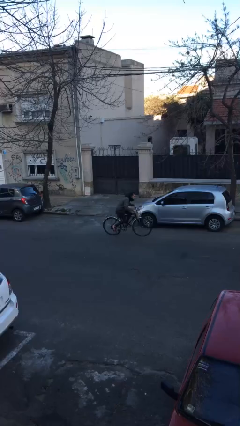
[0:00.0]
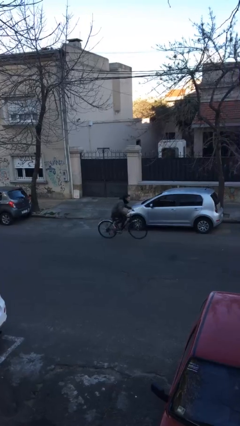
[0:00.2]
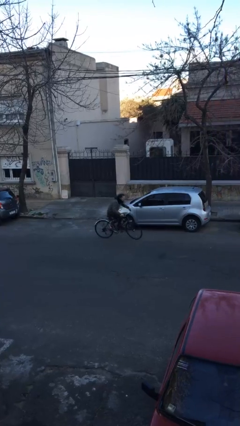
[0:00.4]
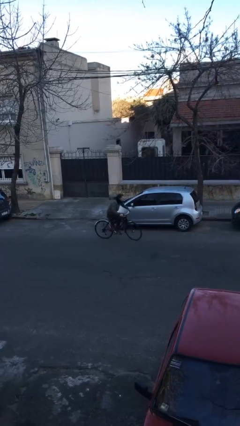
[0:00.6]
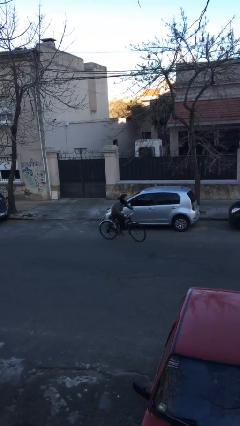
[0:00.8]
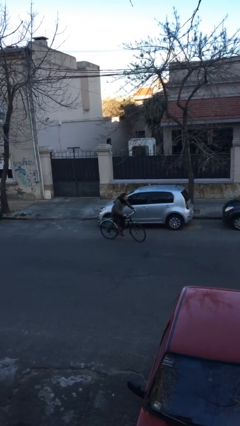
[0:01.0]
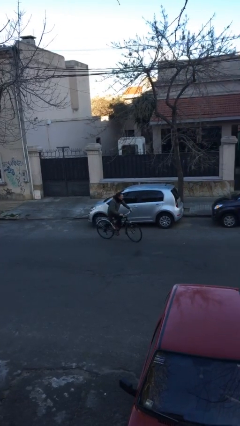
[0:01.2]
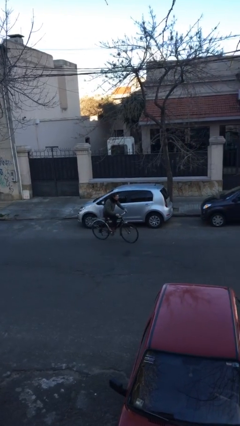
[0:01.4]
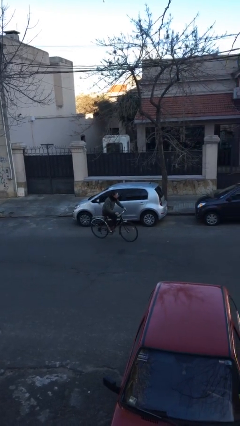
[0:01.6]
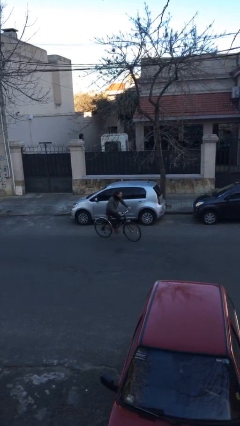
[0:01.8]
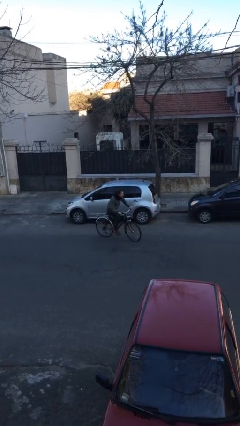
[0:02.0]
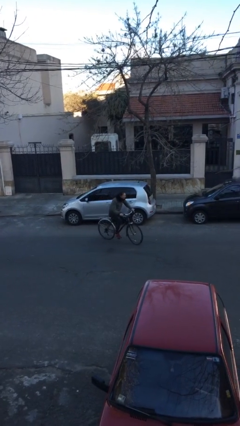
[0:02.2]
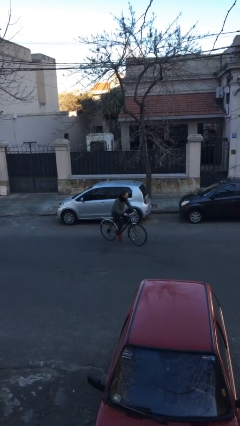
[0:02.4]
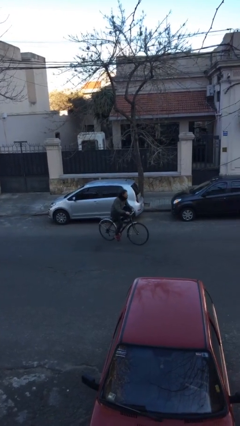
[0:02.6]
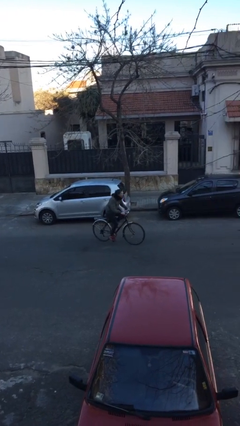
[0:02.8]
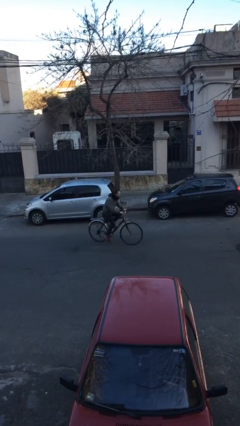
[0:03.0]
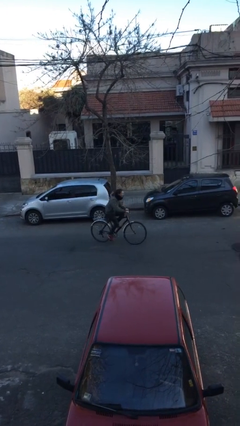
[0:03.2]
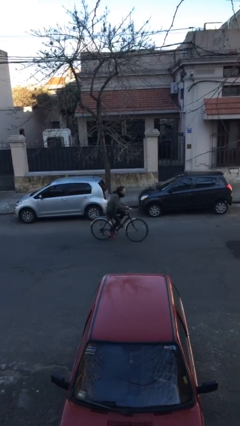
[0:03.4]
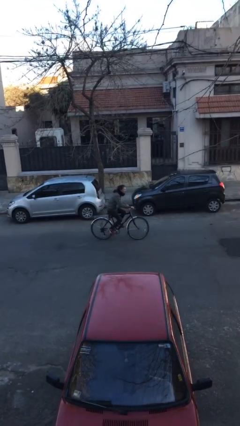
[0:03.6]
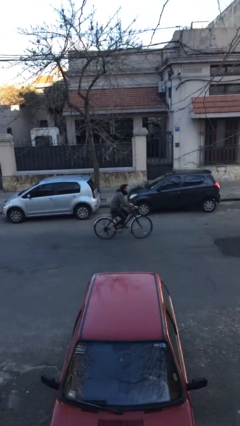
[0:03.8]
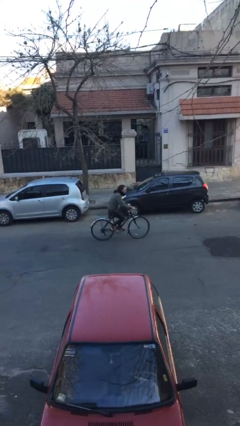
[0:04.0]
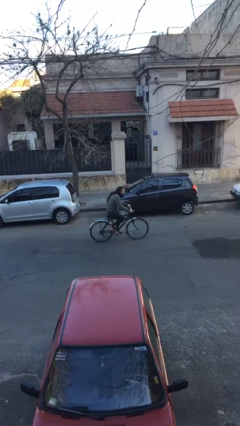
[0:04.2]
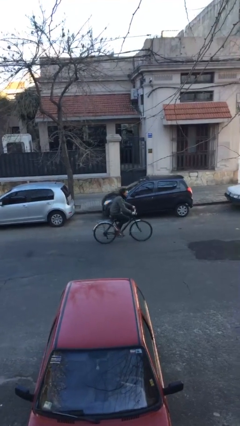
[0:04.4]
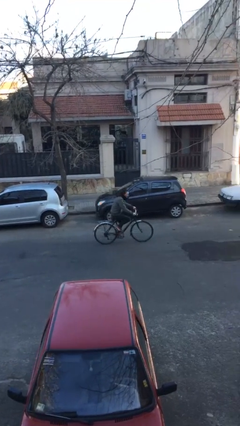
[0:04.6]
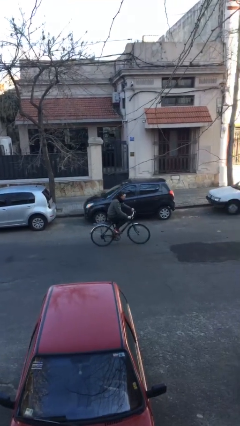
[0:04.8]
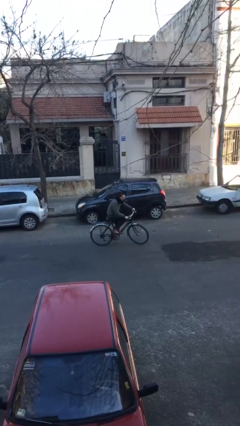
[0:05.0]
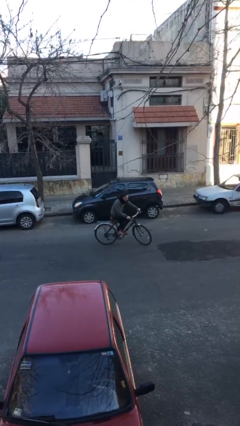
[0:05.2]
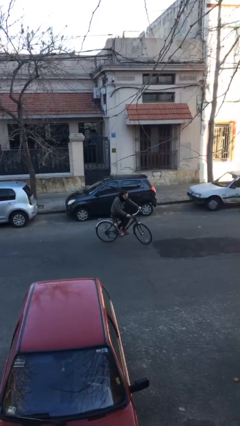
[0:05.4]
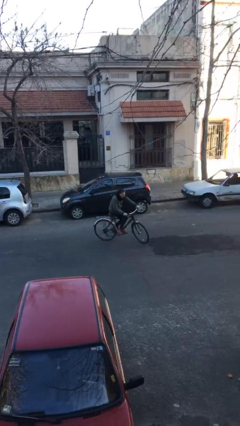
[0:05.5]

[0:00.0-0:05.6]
person rides bicycle

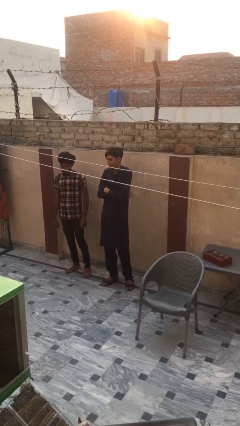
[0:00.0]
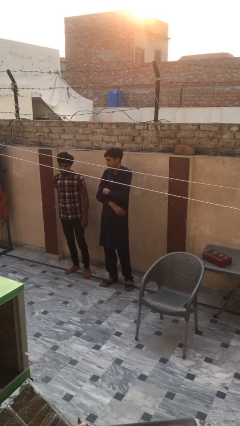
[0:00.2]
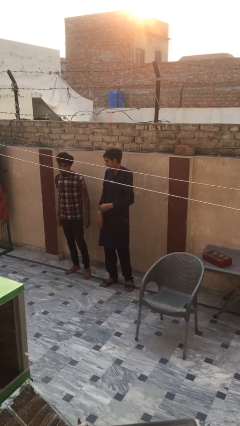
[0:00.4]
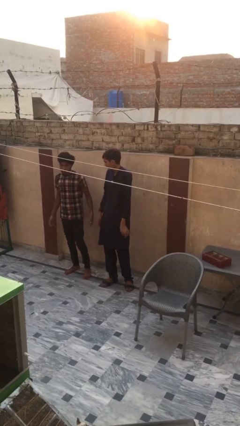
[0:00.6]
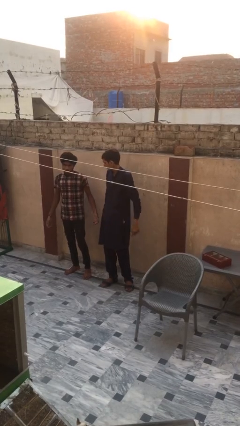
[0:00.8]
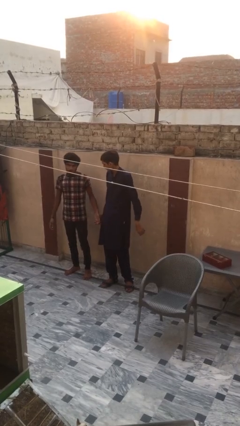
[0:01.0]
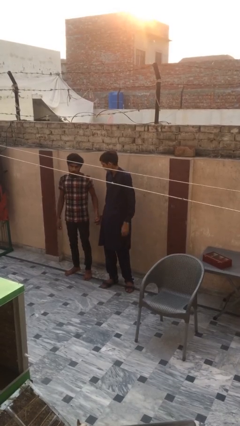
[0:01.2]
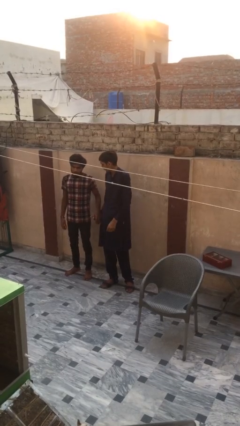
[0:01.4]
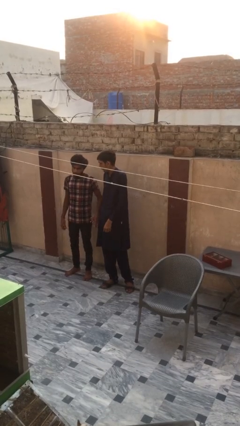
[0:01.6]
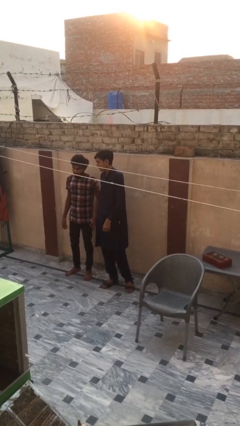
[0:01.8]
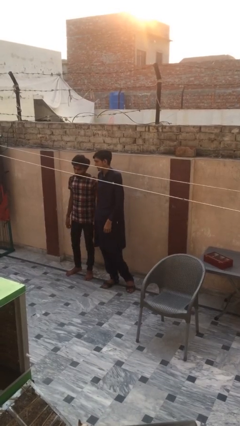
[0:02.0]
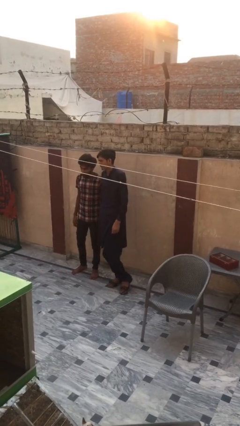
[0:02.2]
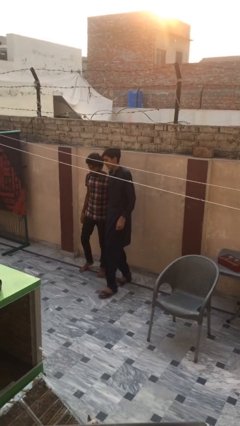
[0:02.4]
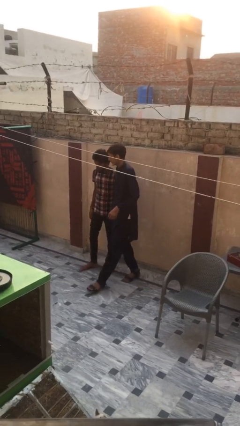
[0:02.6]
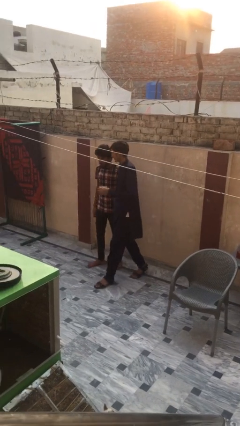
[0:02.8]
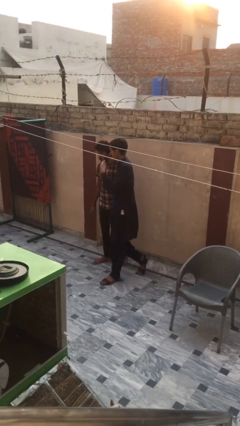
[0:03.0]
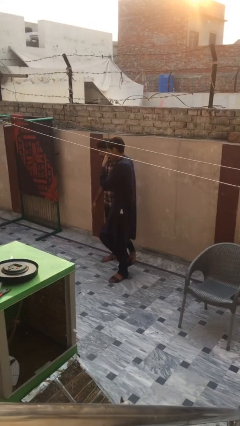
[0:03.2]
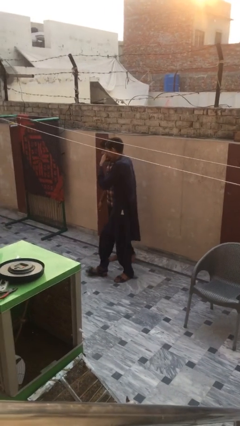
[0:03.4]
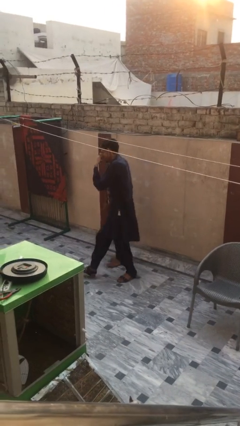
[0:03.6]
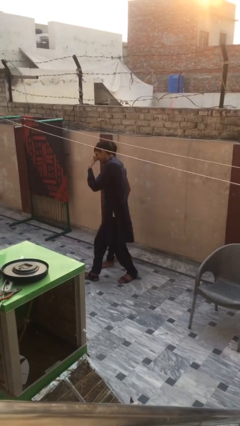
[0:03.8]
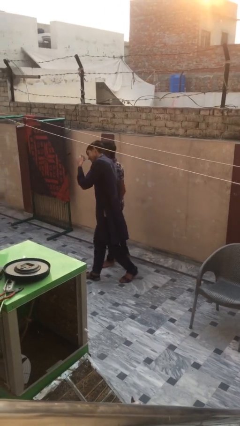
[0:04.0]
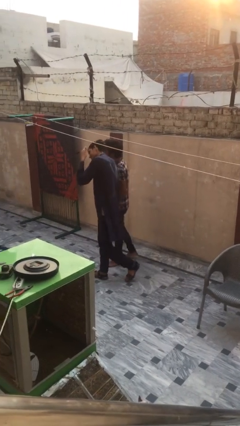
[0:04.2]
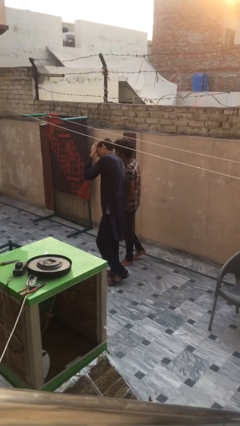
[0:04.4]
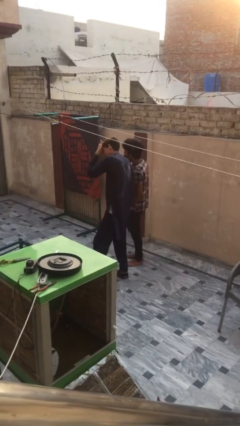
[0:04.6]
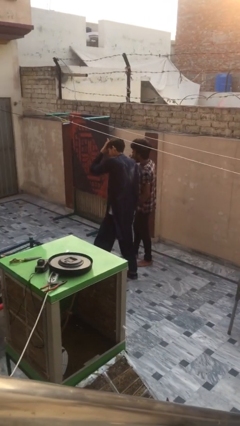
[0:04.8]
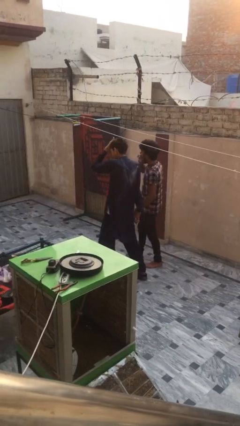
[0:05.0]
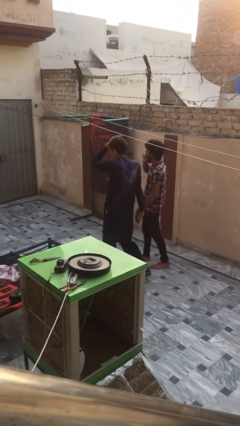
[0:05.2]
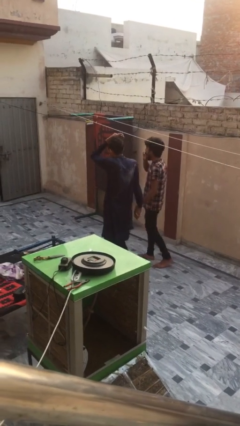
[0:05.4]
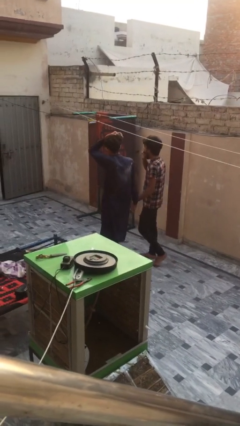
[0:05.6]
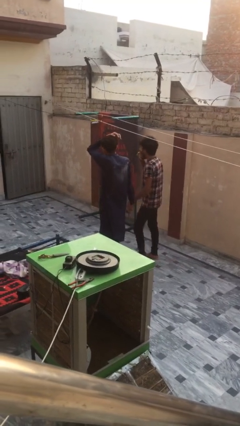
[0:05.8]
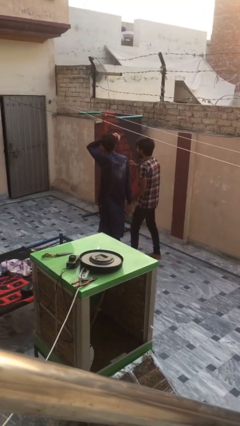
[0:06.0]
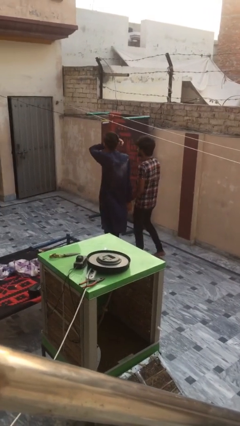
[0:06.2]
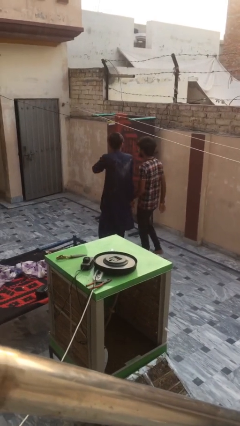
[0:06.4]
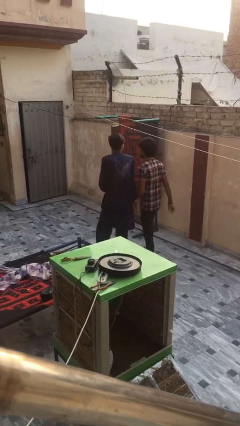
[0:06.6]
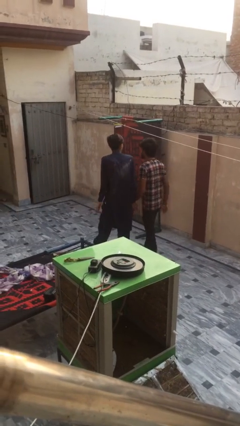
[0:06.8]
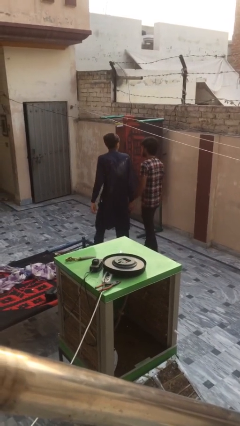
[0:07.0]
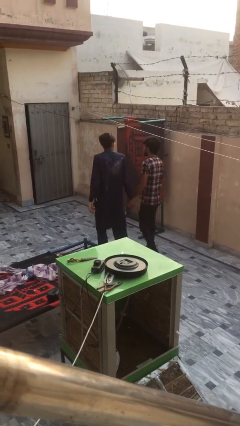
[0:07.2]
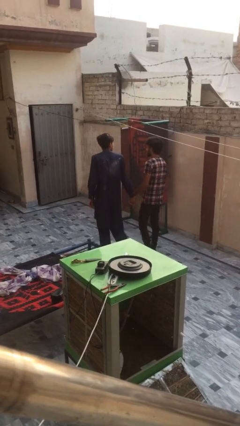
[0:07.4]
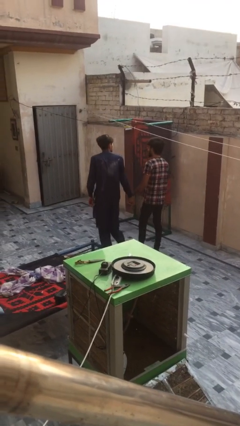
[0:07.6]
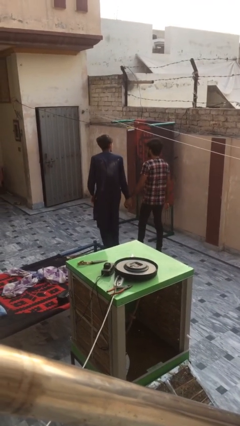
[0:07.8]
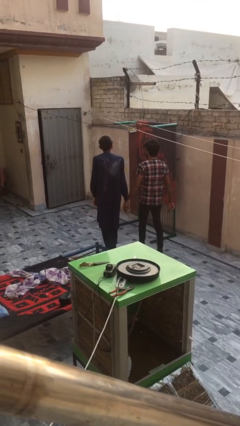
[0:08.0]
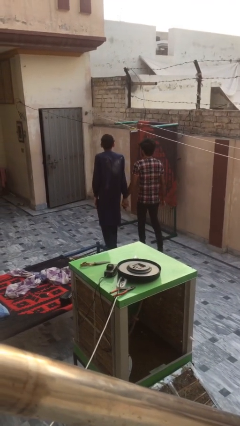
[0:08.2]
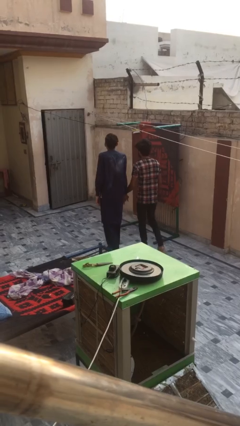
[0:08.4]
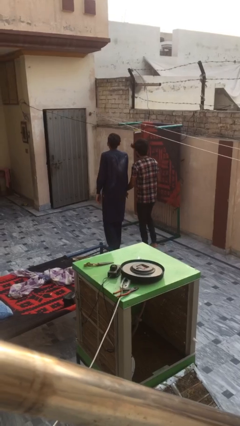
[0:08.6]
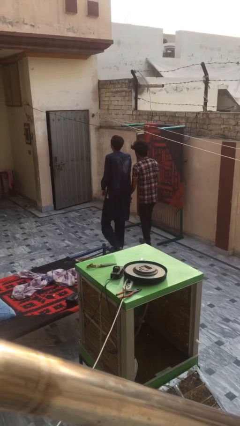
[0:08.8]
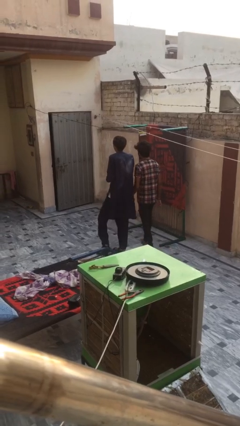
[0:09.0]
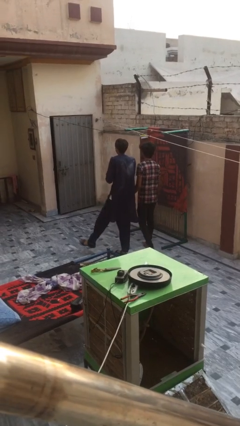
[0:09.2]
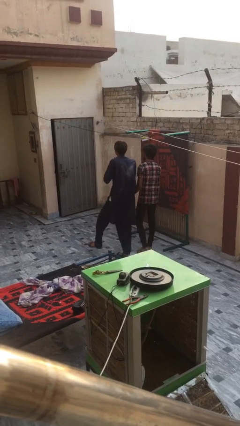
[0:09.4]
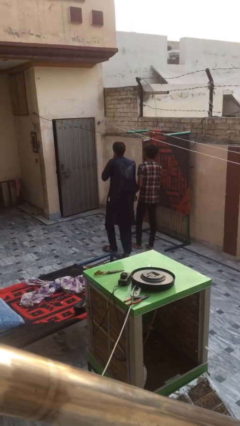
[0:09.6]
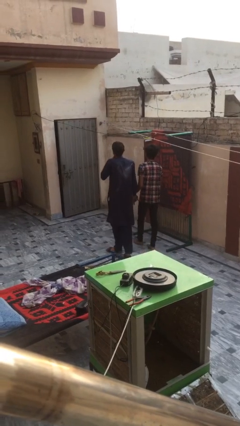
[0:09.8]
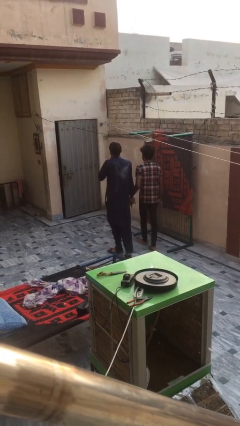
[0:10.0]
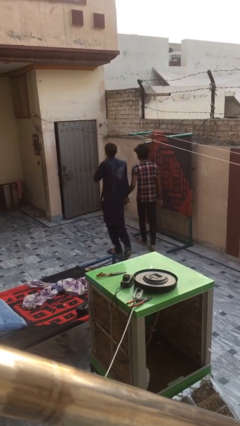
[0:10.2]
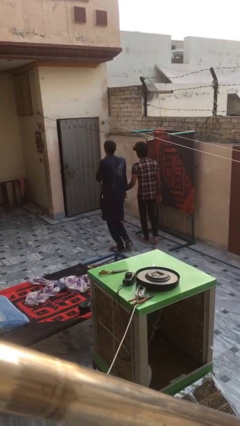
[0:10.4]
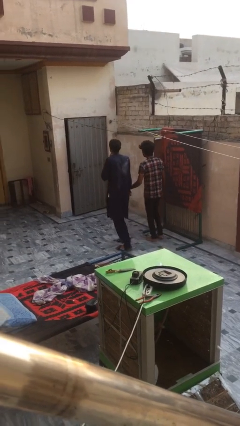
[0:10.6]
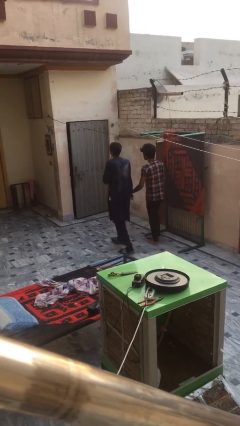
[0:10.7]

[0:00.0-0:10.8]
person holds hand

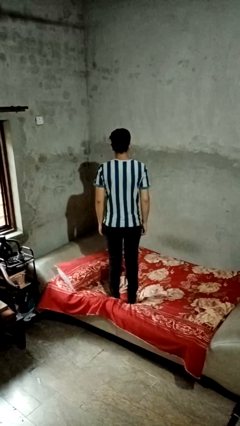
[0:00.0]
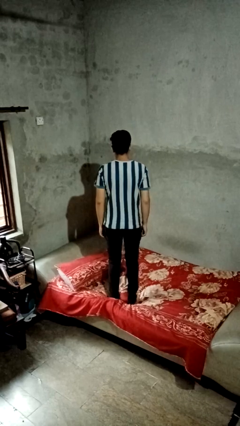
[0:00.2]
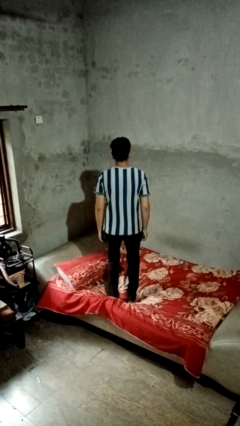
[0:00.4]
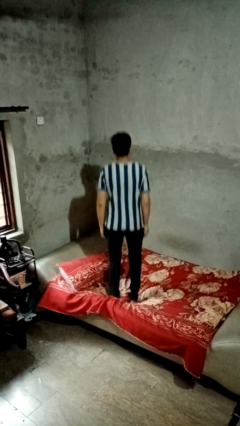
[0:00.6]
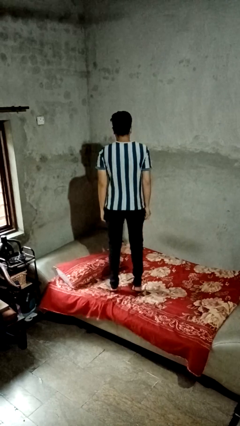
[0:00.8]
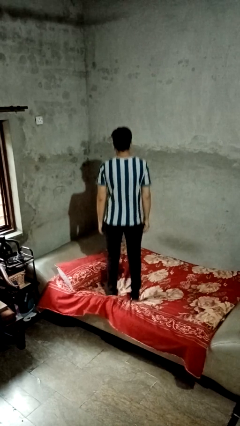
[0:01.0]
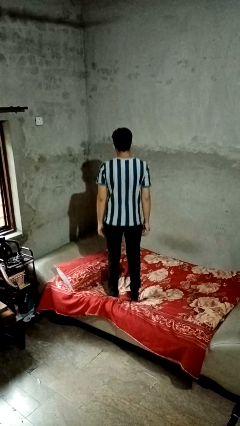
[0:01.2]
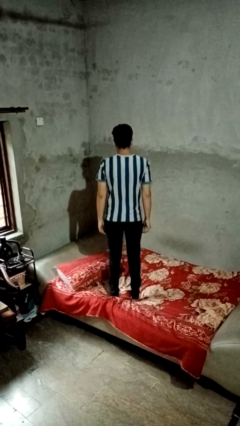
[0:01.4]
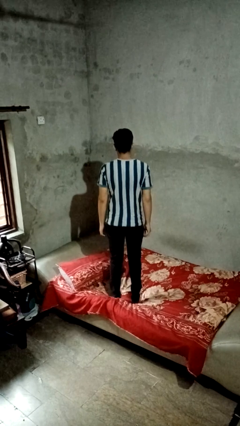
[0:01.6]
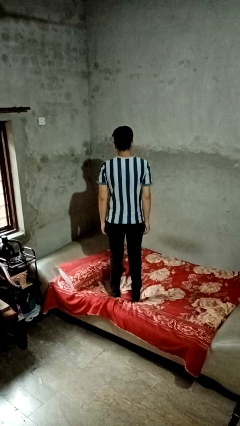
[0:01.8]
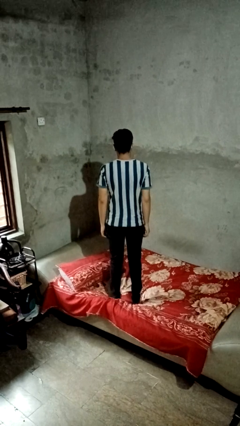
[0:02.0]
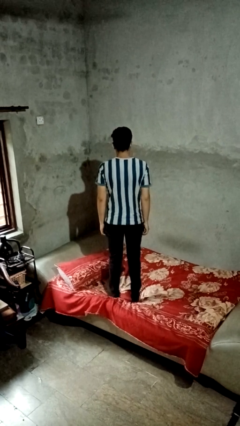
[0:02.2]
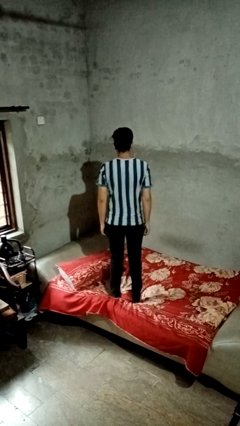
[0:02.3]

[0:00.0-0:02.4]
person jumps on bed
